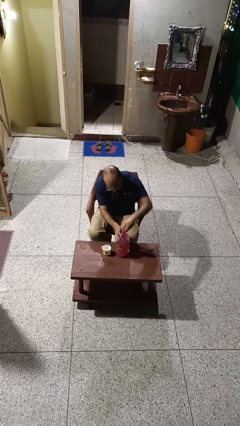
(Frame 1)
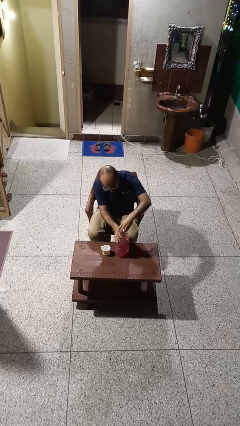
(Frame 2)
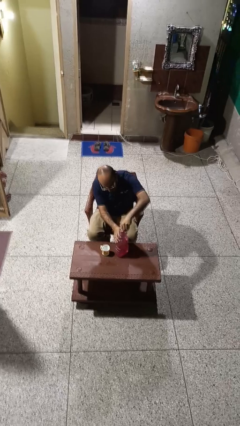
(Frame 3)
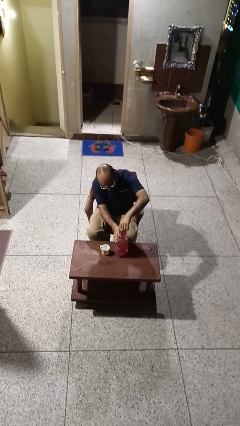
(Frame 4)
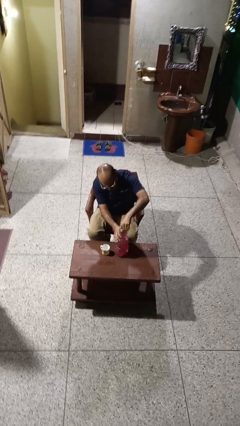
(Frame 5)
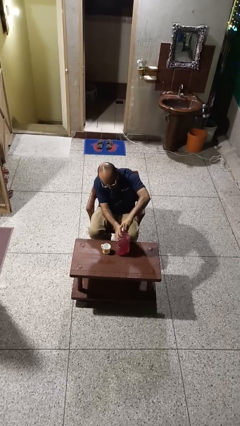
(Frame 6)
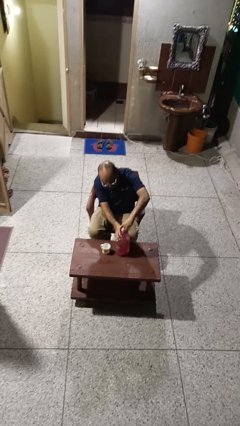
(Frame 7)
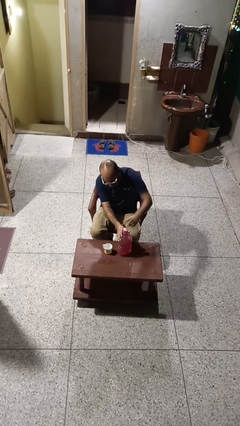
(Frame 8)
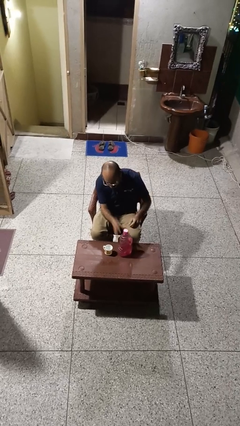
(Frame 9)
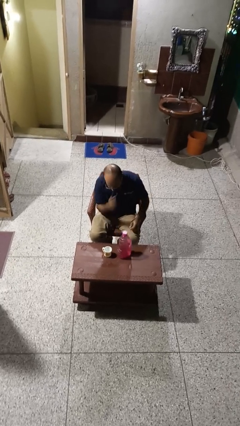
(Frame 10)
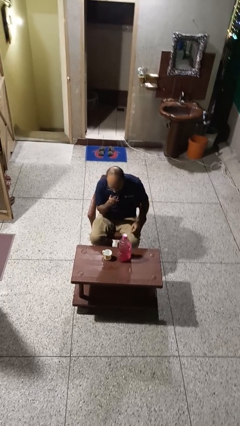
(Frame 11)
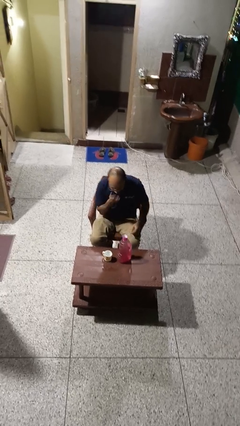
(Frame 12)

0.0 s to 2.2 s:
person screws lid to bottle

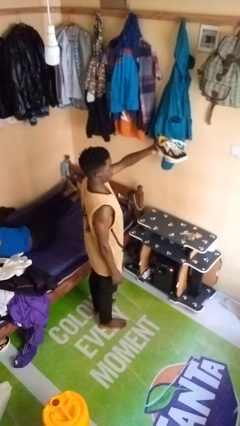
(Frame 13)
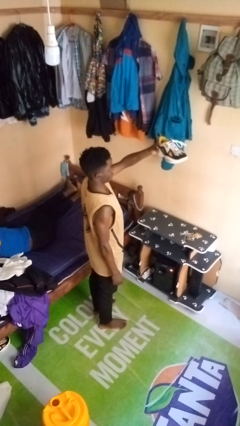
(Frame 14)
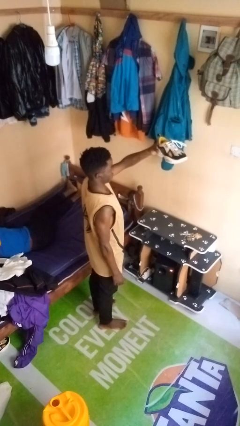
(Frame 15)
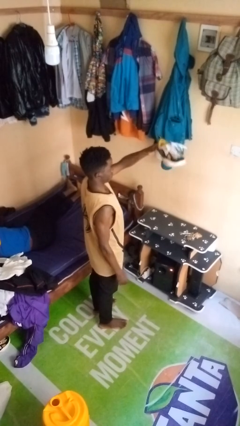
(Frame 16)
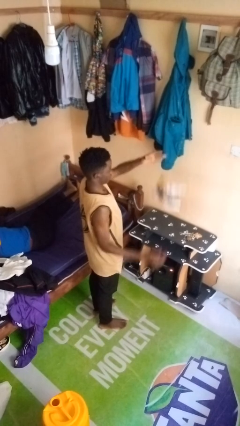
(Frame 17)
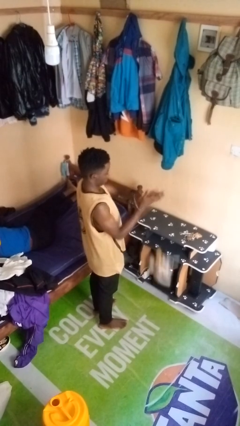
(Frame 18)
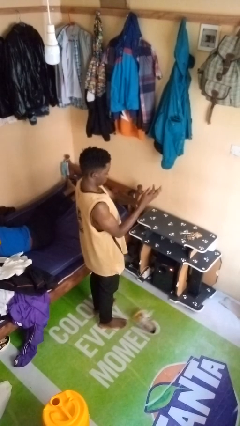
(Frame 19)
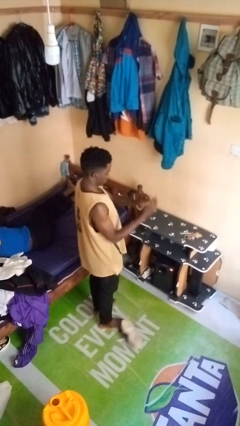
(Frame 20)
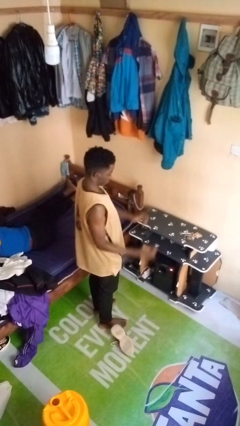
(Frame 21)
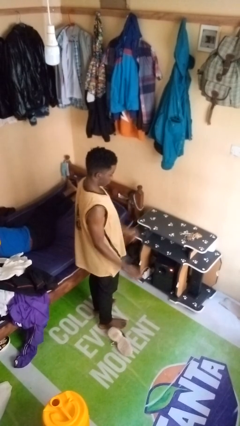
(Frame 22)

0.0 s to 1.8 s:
person drops object

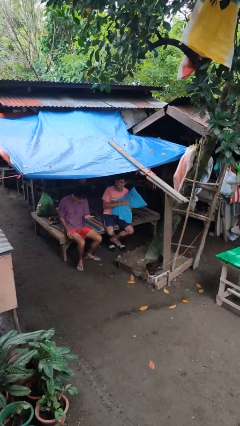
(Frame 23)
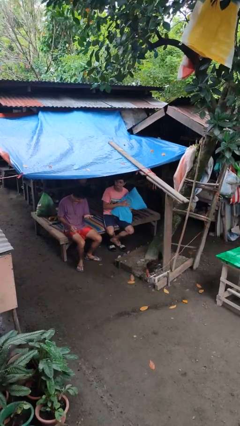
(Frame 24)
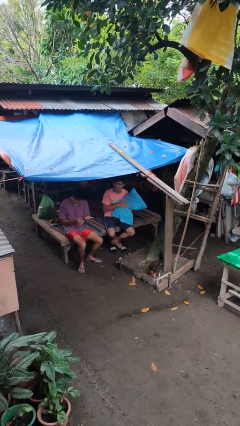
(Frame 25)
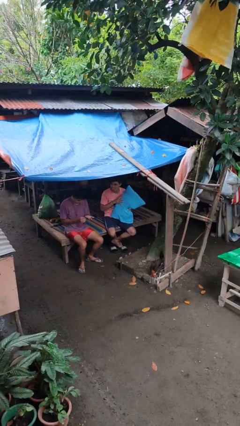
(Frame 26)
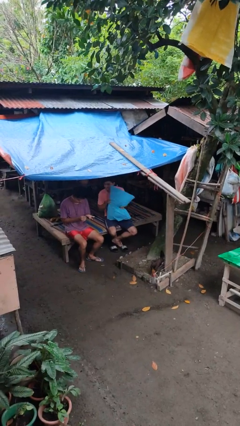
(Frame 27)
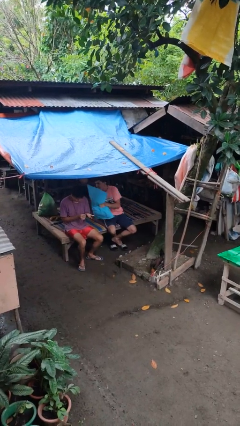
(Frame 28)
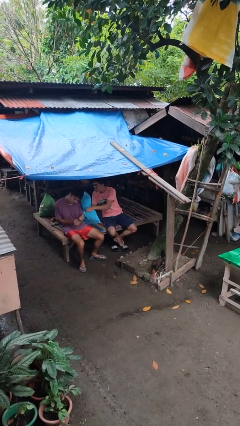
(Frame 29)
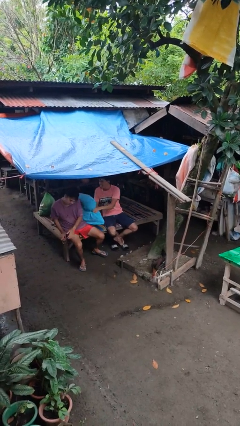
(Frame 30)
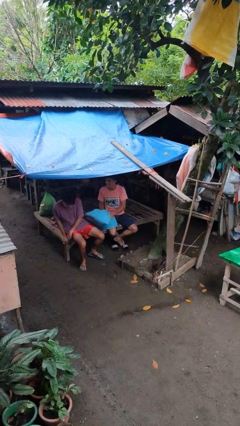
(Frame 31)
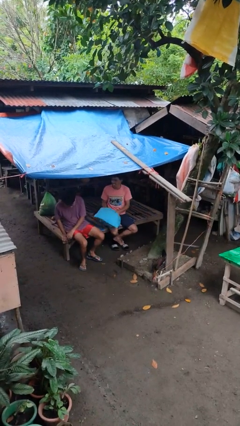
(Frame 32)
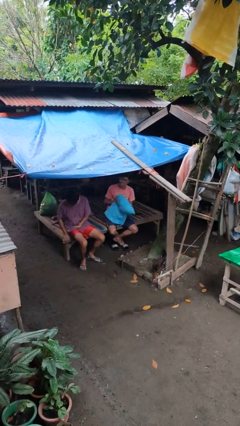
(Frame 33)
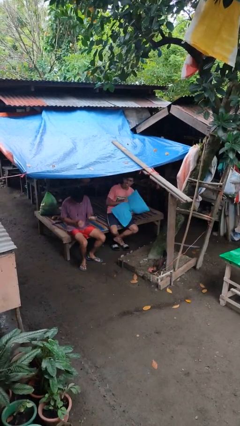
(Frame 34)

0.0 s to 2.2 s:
person hits person with pillow

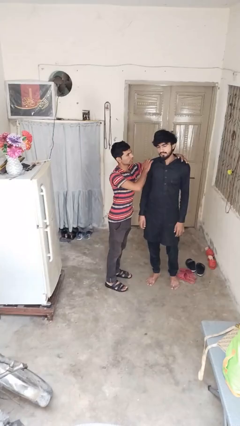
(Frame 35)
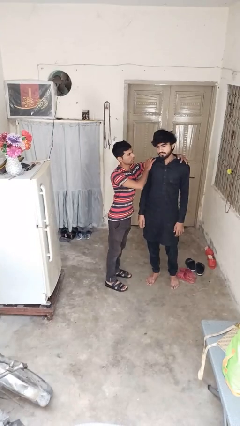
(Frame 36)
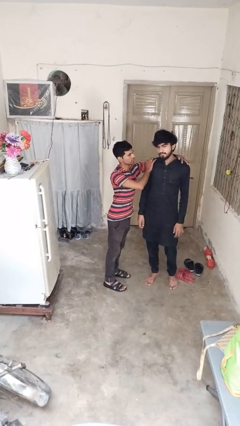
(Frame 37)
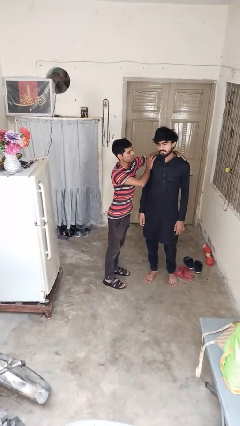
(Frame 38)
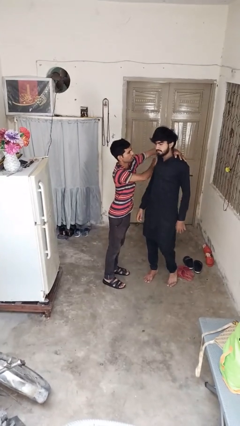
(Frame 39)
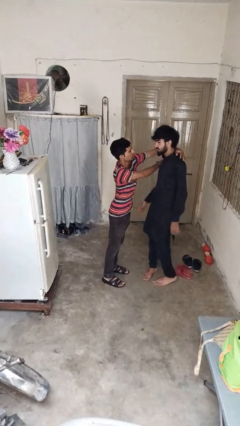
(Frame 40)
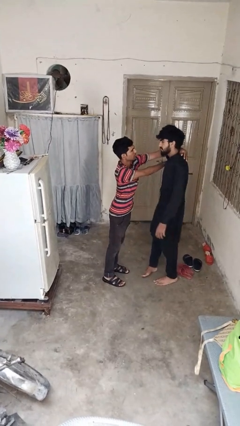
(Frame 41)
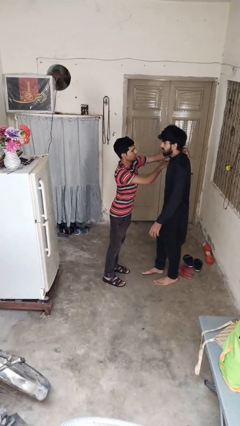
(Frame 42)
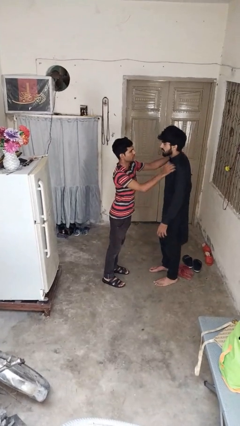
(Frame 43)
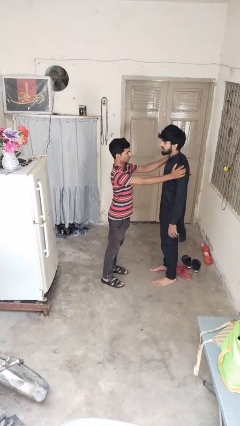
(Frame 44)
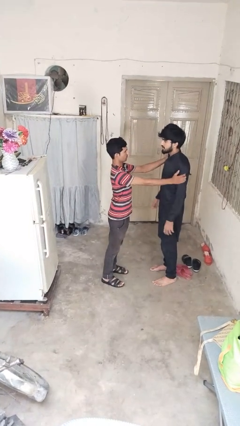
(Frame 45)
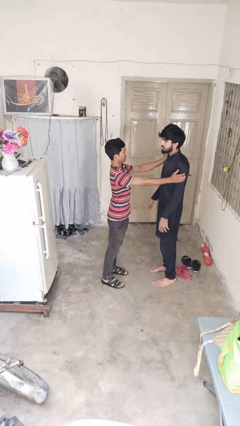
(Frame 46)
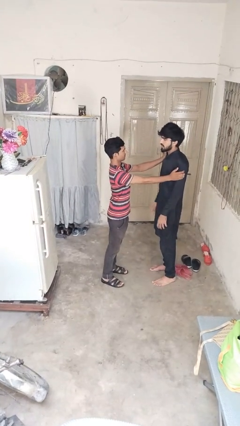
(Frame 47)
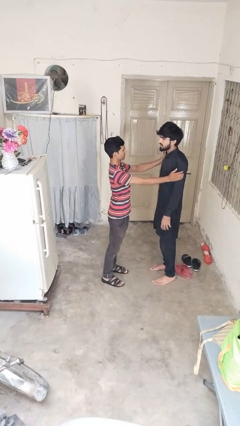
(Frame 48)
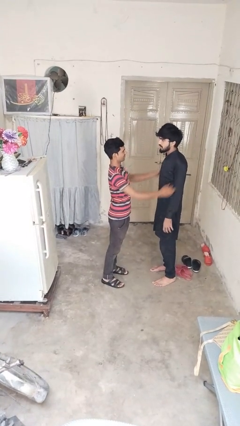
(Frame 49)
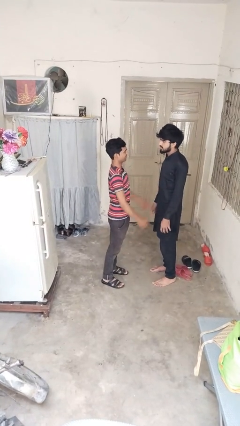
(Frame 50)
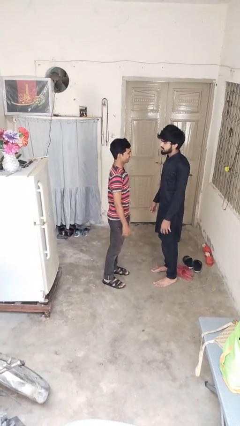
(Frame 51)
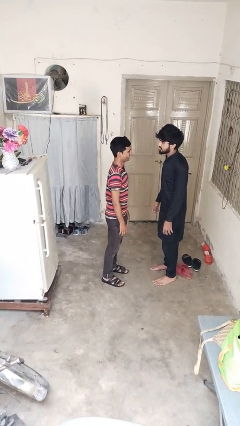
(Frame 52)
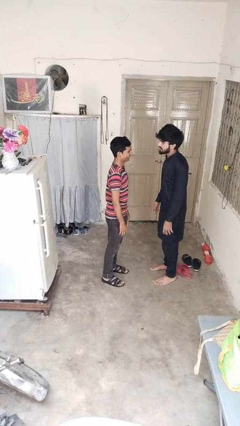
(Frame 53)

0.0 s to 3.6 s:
person spins person around

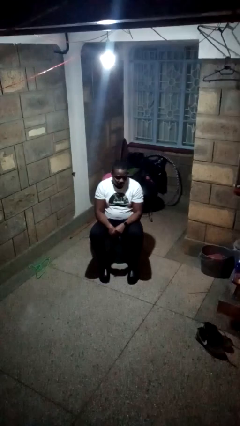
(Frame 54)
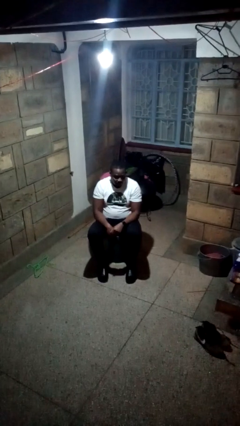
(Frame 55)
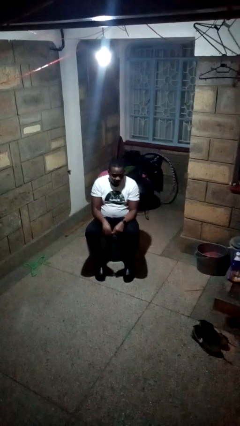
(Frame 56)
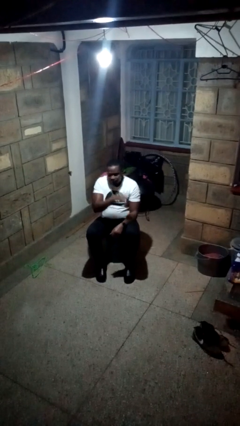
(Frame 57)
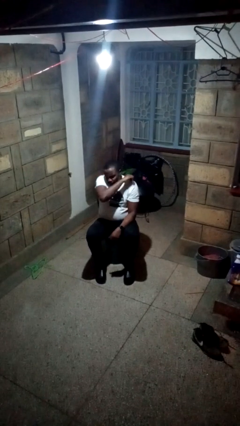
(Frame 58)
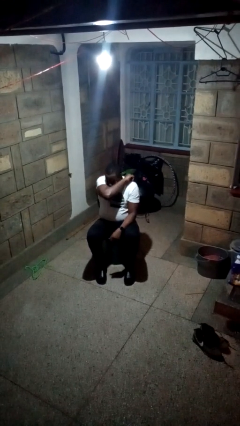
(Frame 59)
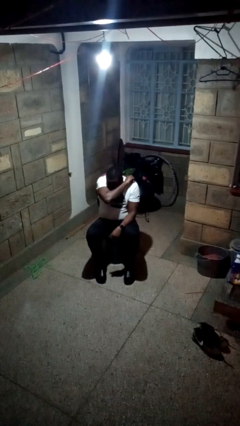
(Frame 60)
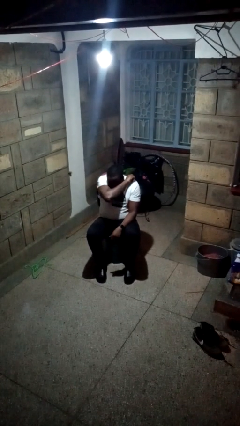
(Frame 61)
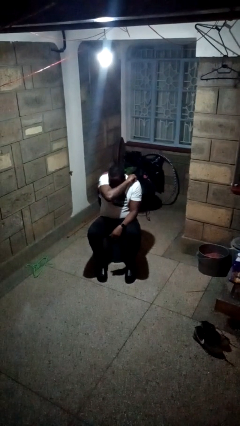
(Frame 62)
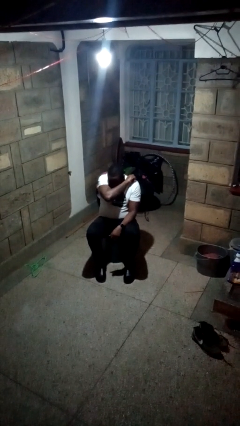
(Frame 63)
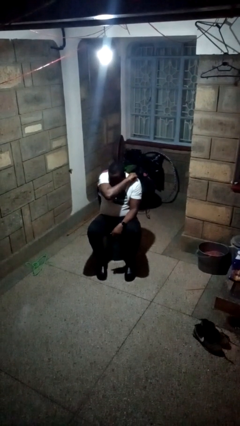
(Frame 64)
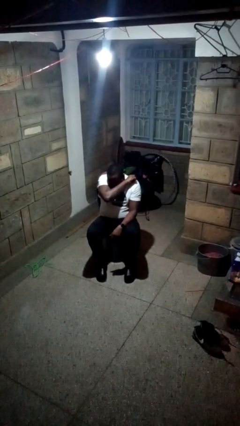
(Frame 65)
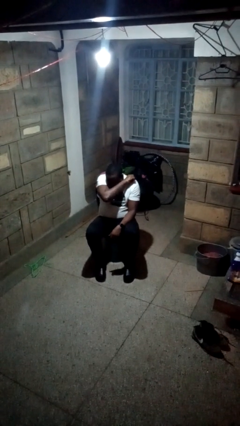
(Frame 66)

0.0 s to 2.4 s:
person sneezes into arm

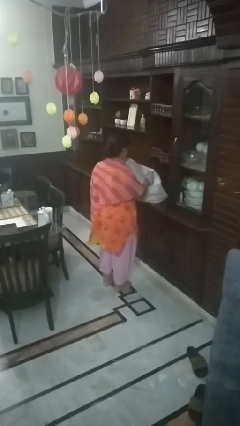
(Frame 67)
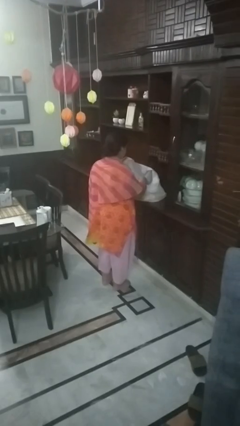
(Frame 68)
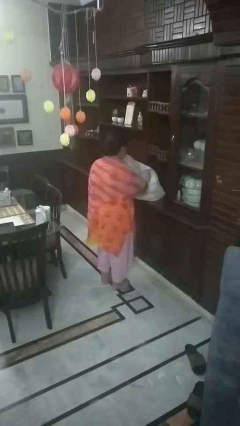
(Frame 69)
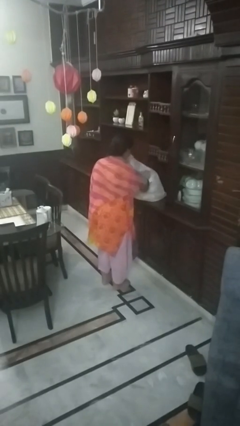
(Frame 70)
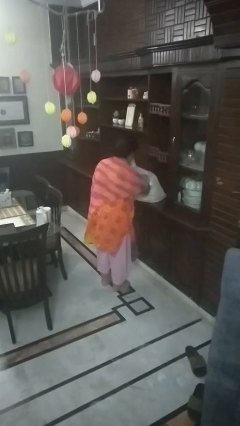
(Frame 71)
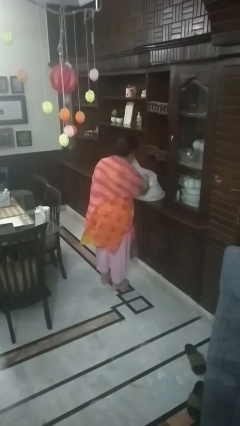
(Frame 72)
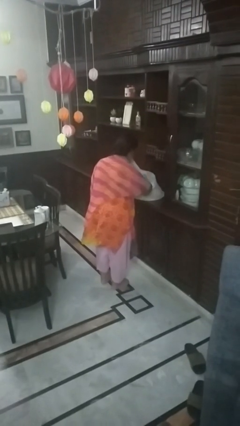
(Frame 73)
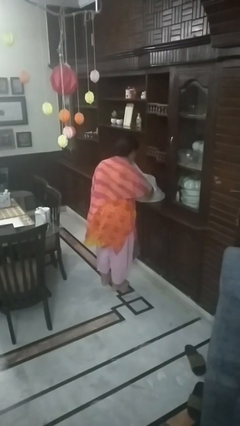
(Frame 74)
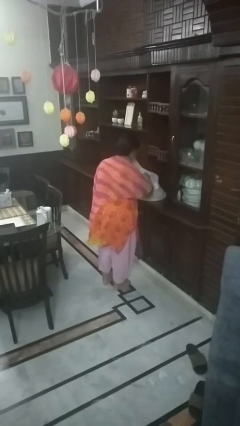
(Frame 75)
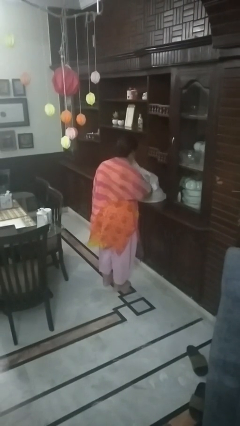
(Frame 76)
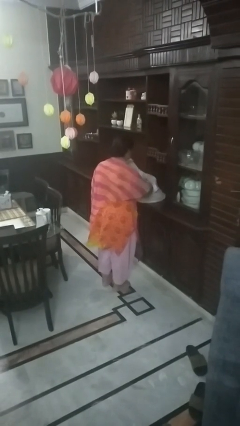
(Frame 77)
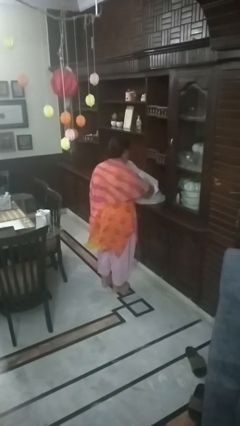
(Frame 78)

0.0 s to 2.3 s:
person searches in bag

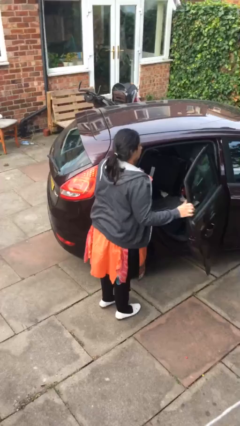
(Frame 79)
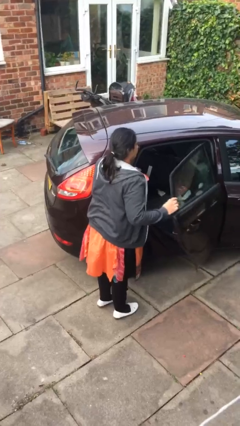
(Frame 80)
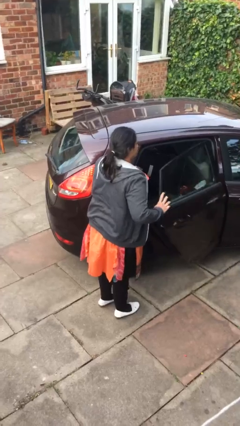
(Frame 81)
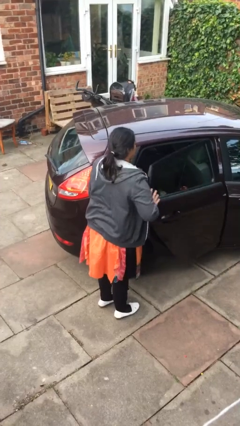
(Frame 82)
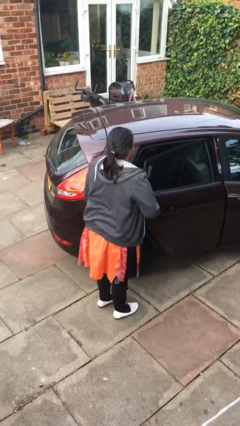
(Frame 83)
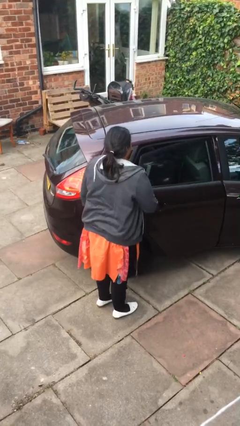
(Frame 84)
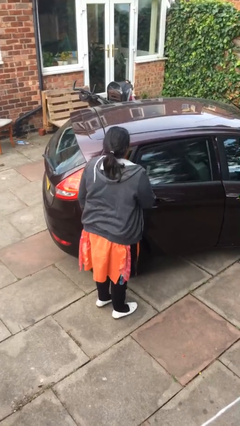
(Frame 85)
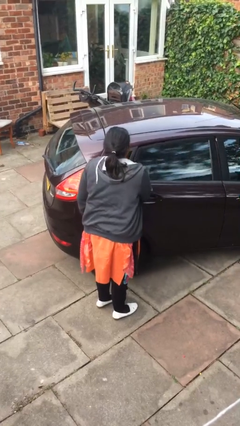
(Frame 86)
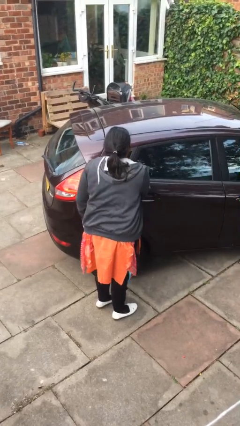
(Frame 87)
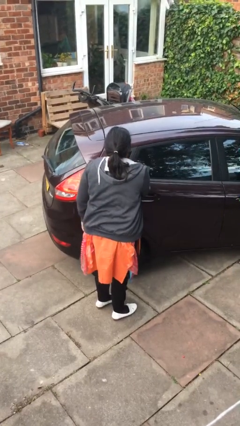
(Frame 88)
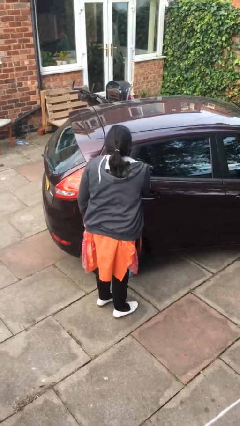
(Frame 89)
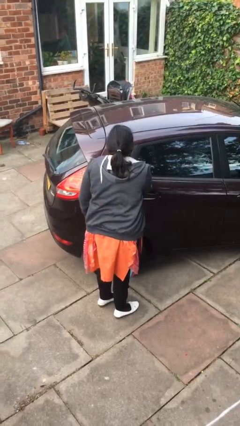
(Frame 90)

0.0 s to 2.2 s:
person closes car door
